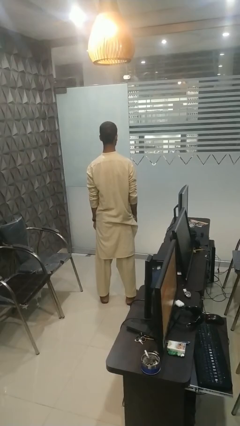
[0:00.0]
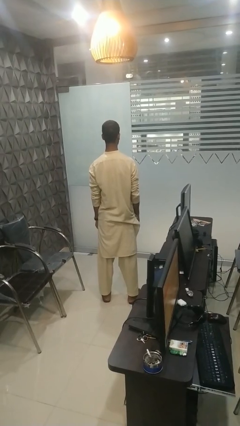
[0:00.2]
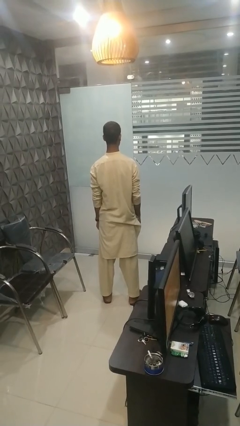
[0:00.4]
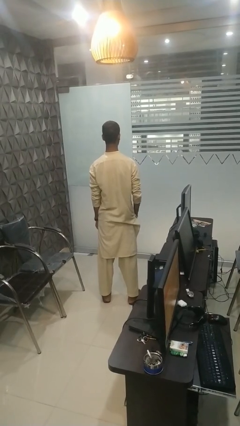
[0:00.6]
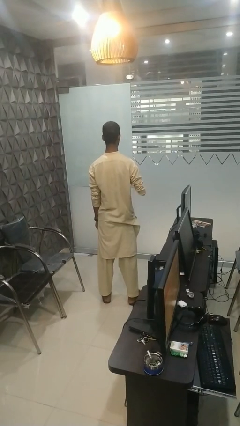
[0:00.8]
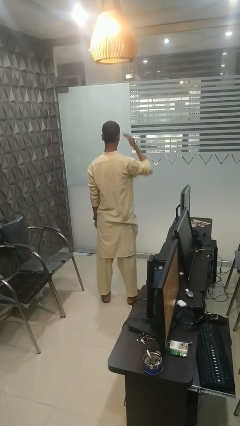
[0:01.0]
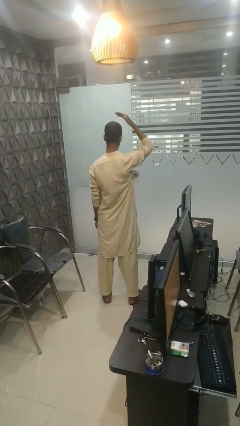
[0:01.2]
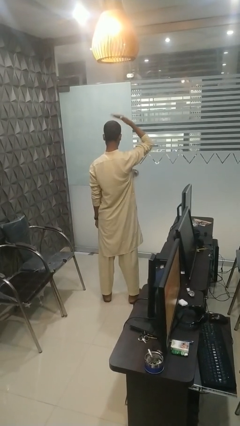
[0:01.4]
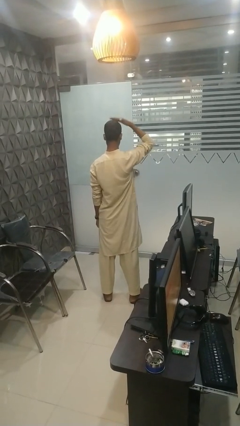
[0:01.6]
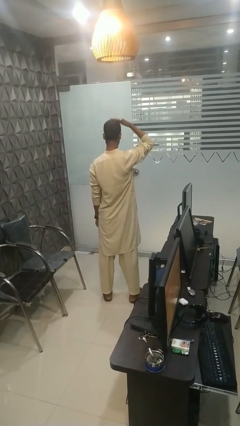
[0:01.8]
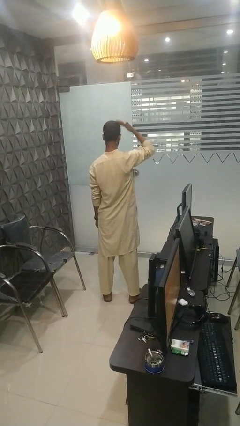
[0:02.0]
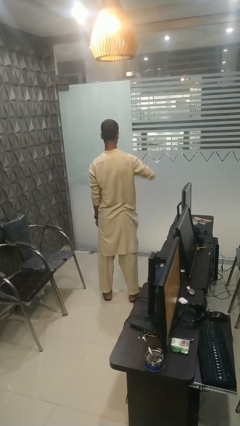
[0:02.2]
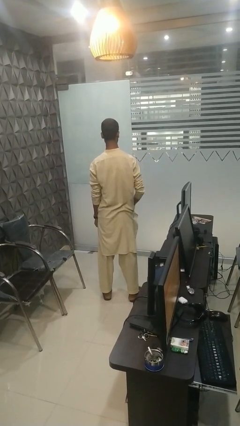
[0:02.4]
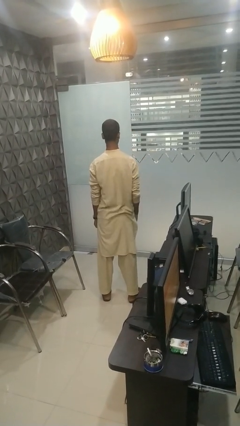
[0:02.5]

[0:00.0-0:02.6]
person pats head

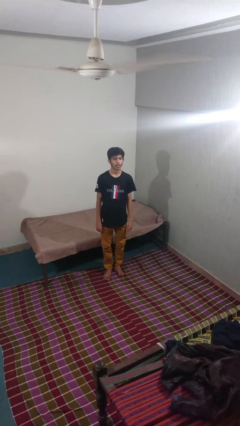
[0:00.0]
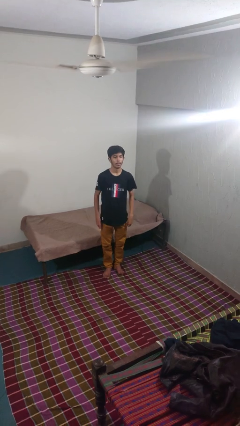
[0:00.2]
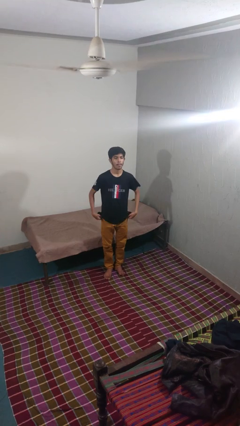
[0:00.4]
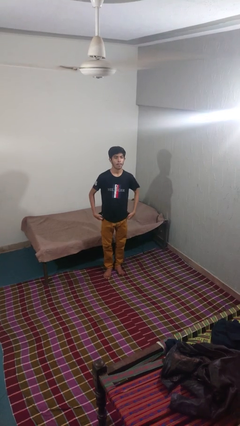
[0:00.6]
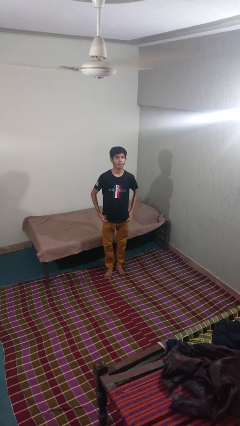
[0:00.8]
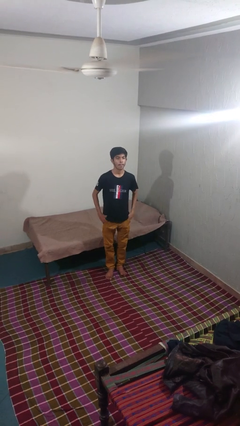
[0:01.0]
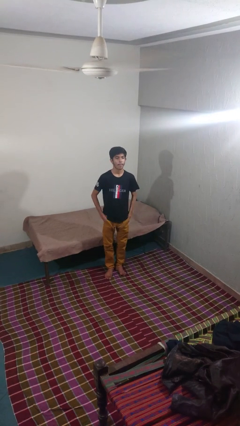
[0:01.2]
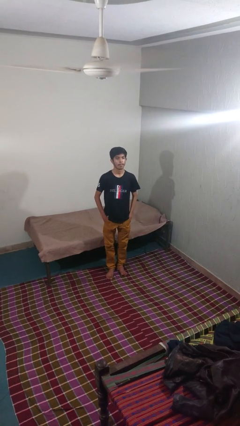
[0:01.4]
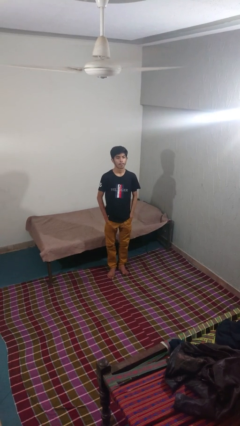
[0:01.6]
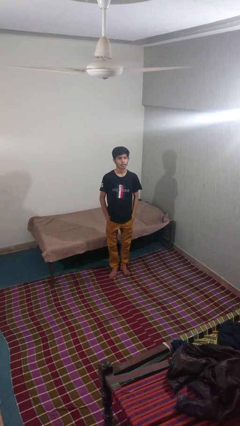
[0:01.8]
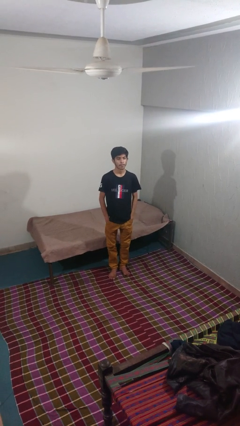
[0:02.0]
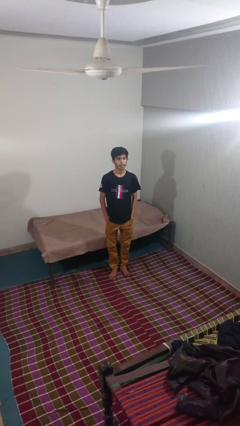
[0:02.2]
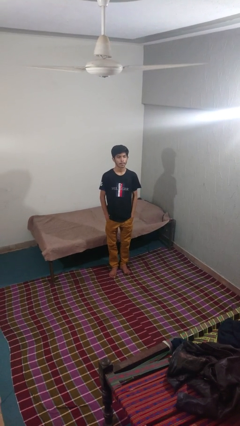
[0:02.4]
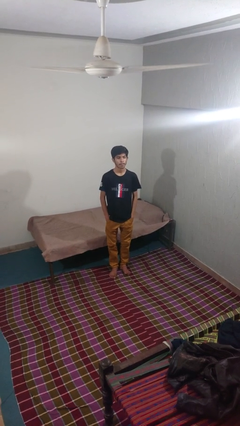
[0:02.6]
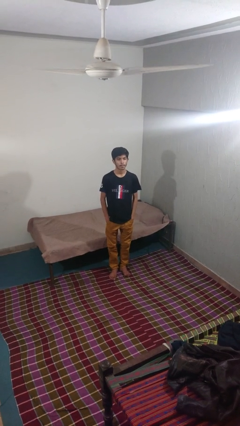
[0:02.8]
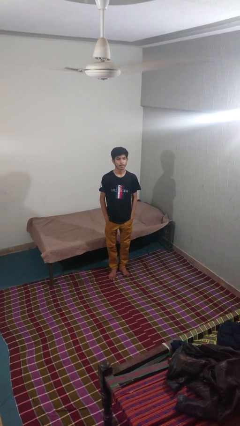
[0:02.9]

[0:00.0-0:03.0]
person puts hands in back pockets

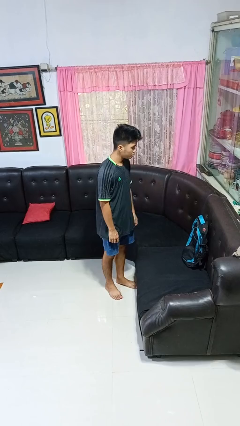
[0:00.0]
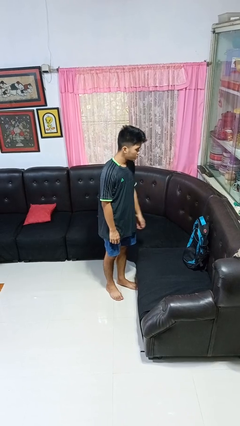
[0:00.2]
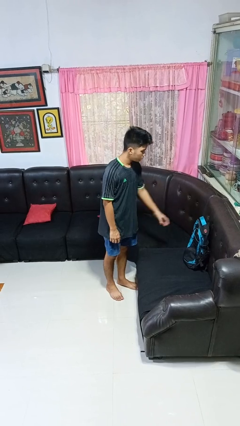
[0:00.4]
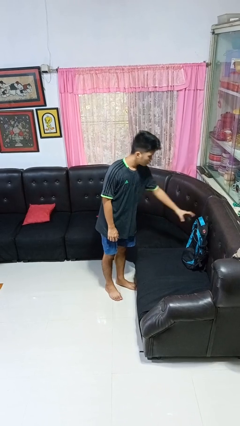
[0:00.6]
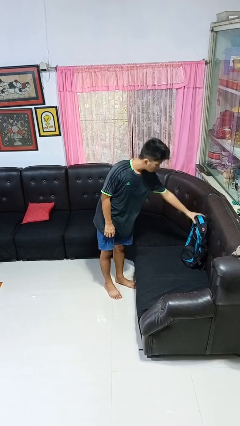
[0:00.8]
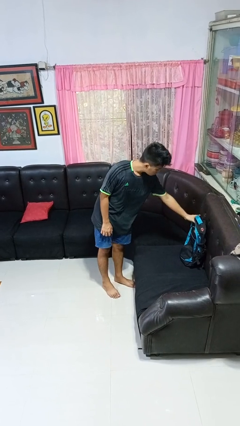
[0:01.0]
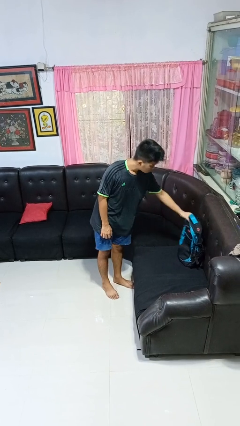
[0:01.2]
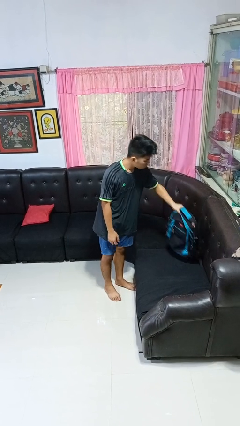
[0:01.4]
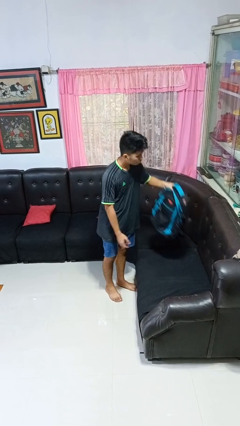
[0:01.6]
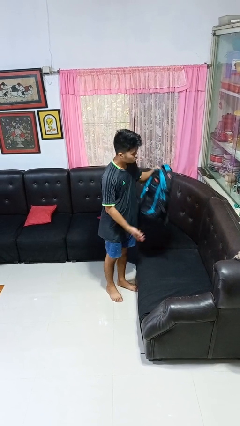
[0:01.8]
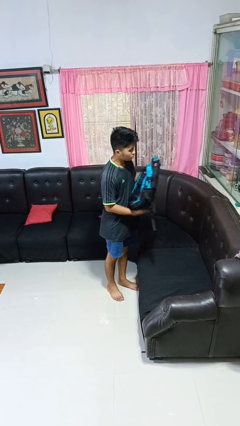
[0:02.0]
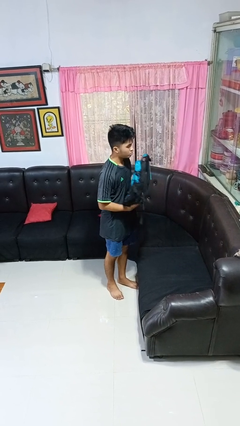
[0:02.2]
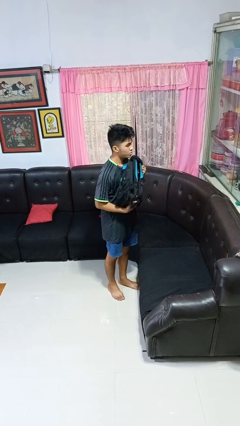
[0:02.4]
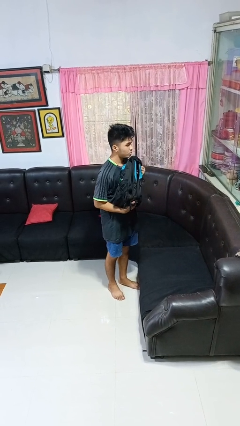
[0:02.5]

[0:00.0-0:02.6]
person picks up object from couch

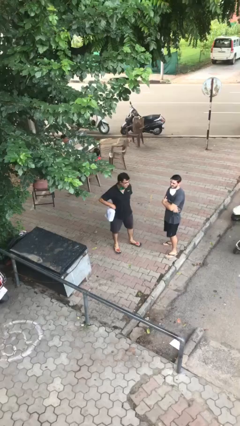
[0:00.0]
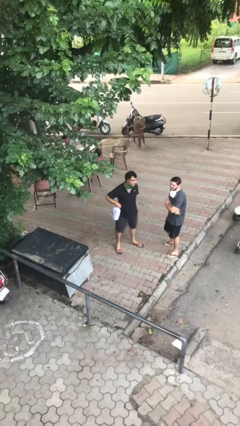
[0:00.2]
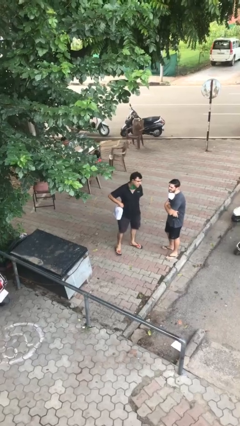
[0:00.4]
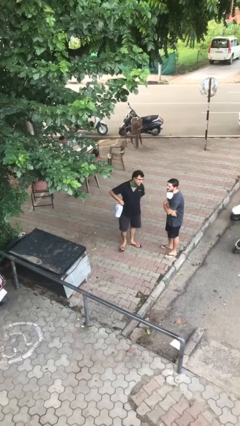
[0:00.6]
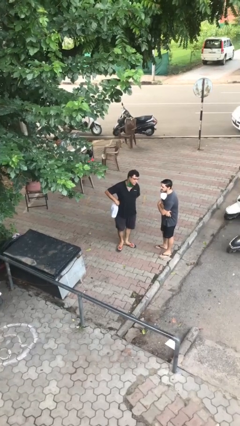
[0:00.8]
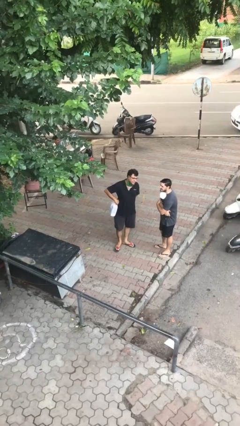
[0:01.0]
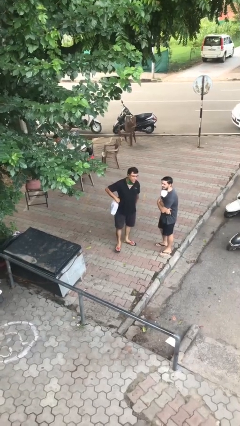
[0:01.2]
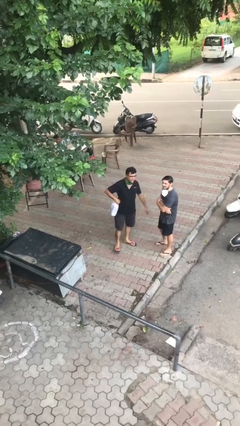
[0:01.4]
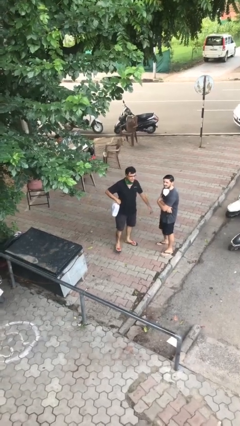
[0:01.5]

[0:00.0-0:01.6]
person laughs with person

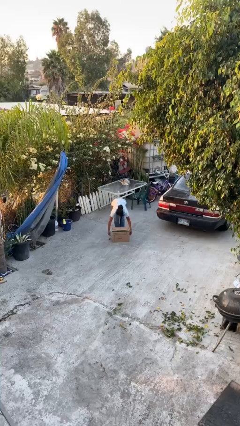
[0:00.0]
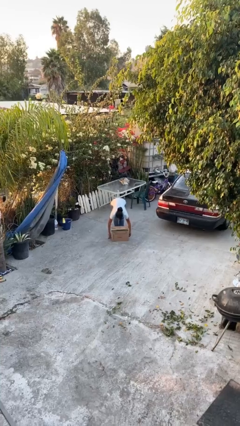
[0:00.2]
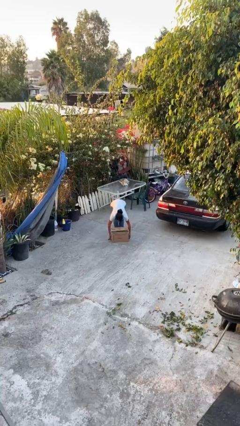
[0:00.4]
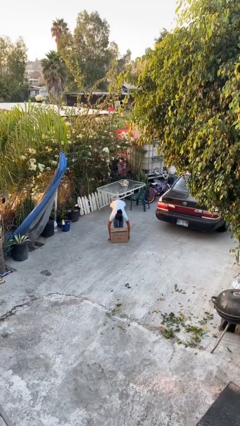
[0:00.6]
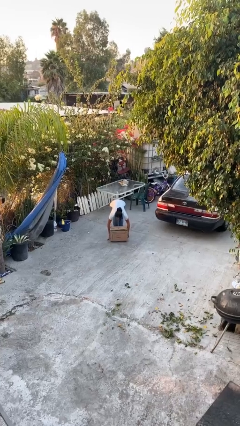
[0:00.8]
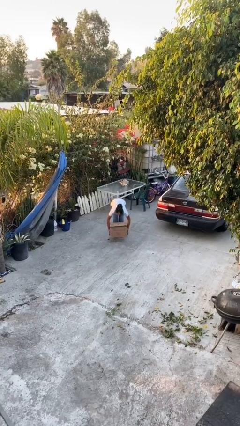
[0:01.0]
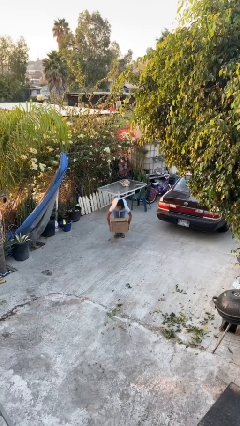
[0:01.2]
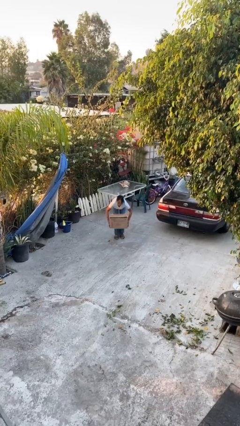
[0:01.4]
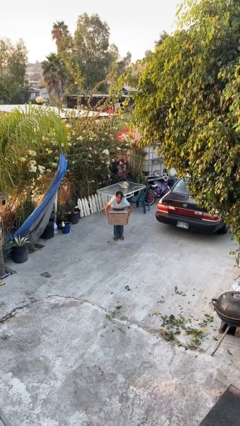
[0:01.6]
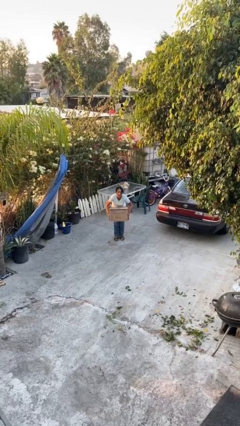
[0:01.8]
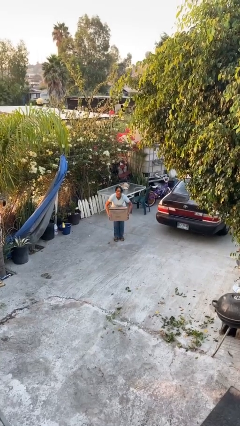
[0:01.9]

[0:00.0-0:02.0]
person picks up object from floor

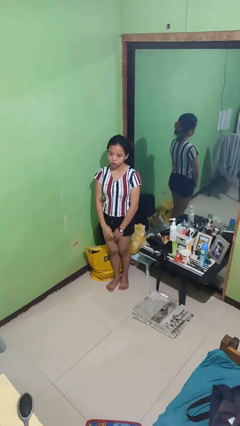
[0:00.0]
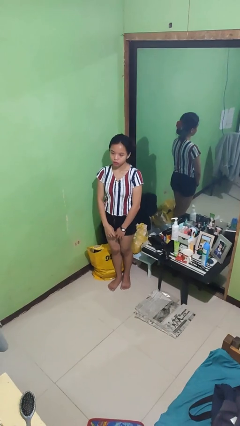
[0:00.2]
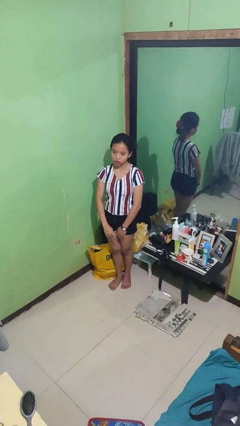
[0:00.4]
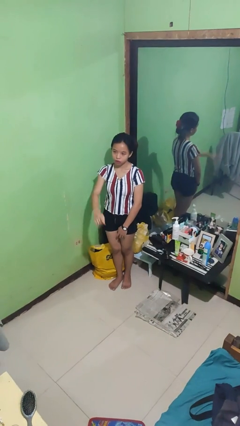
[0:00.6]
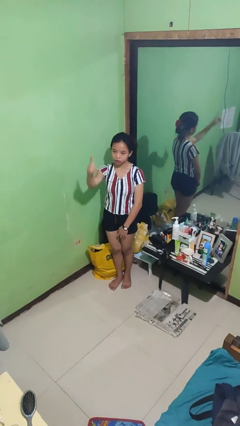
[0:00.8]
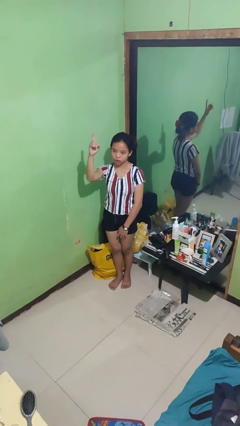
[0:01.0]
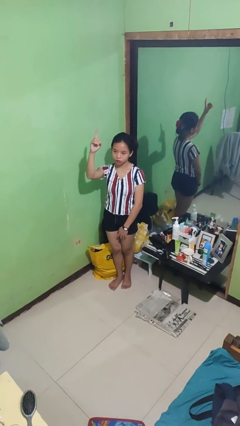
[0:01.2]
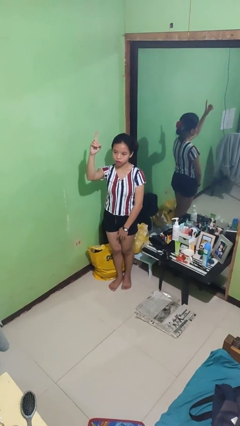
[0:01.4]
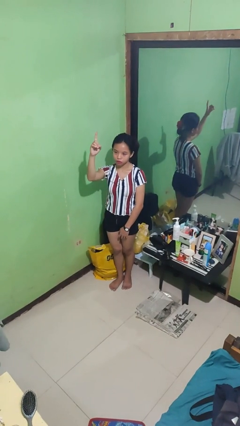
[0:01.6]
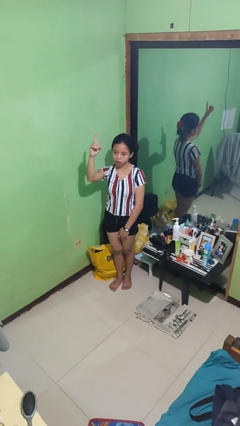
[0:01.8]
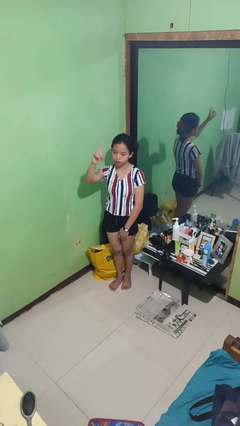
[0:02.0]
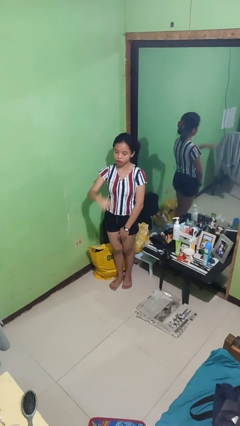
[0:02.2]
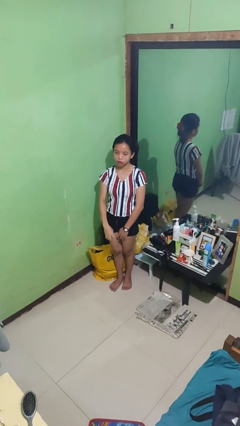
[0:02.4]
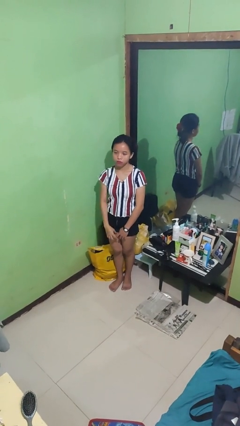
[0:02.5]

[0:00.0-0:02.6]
person gestures number one

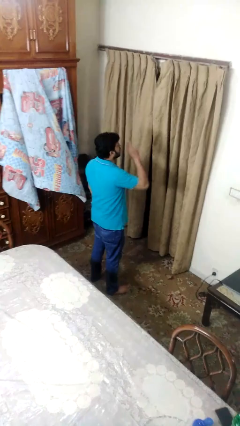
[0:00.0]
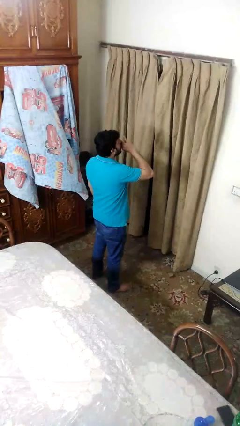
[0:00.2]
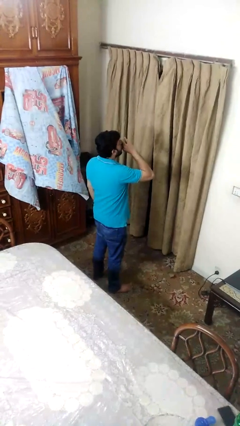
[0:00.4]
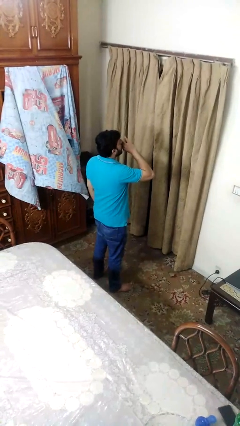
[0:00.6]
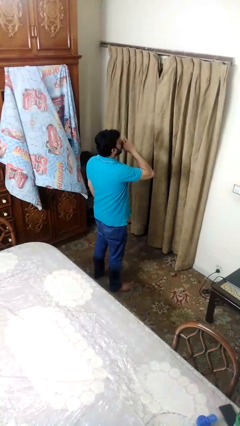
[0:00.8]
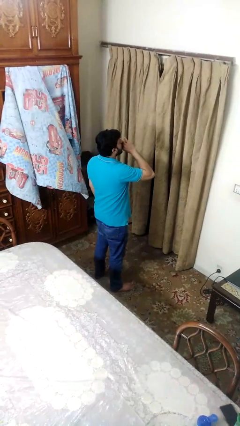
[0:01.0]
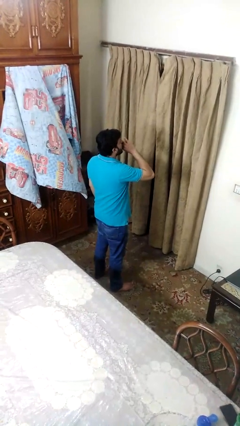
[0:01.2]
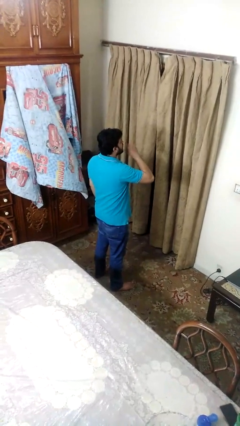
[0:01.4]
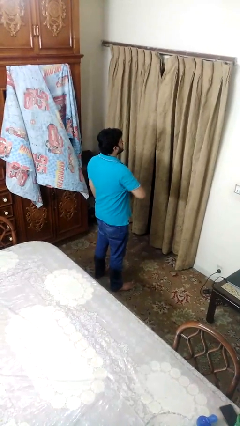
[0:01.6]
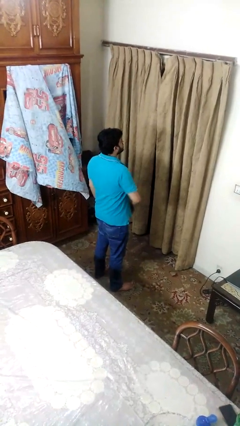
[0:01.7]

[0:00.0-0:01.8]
person yawns

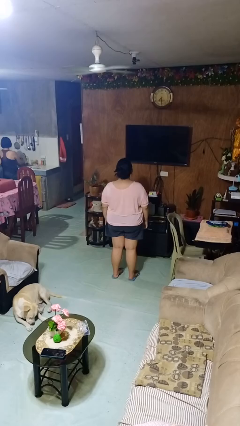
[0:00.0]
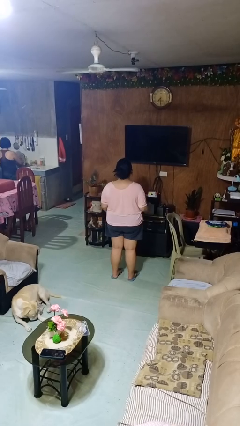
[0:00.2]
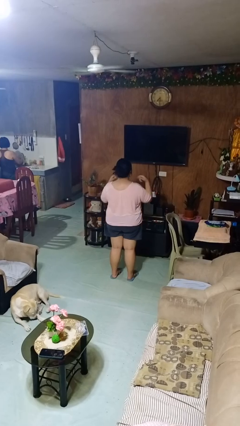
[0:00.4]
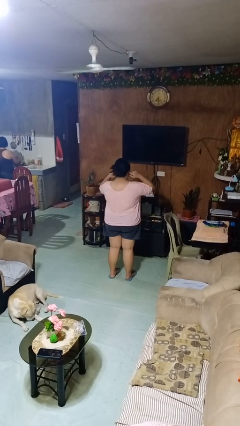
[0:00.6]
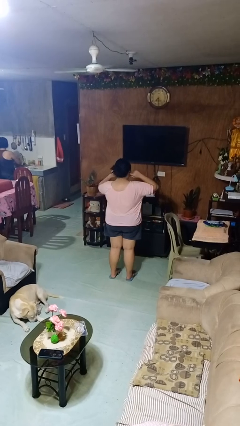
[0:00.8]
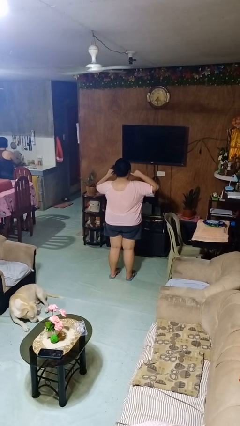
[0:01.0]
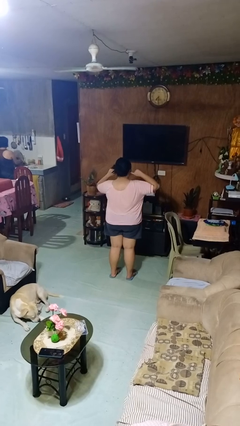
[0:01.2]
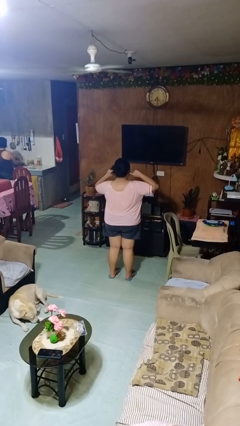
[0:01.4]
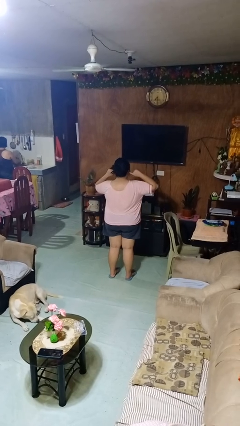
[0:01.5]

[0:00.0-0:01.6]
person puts fingers in ear
